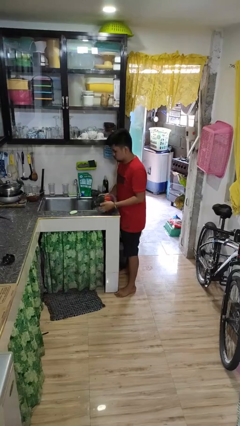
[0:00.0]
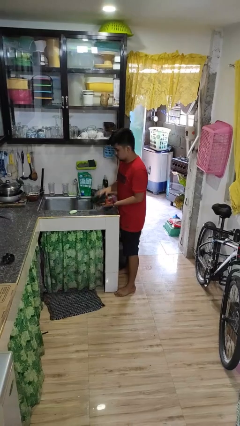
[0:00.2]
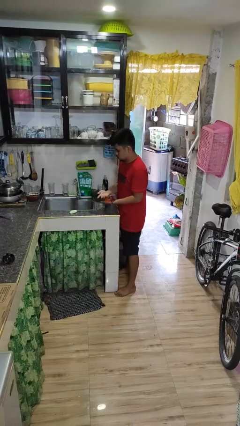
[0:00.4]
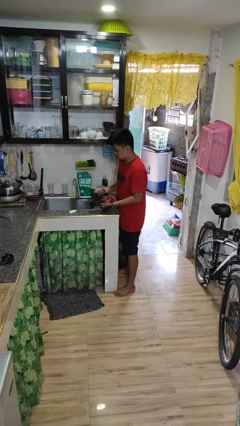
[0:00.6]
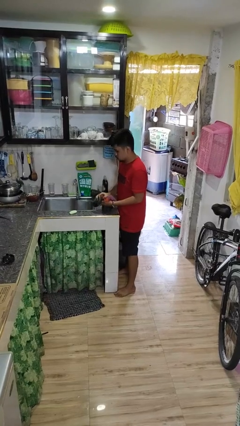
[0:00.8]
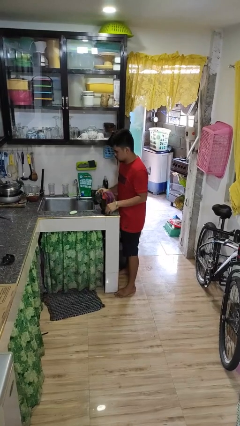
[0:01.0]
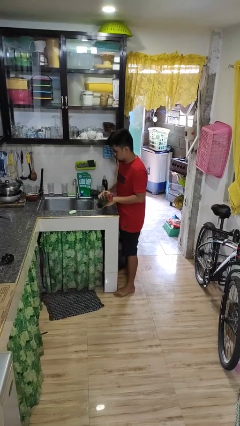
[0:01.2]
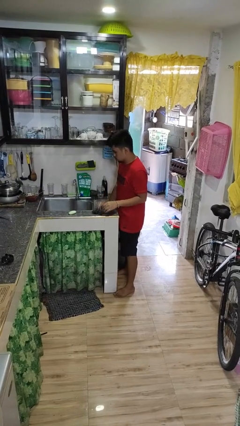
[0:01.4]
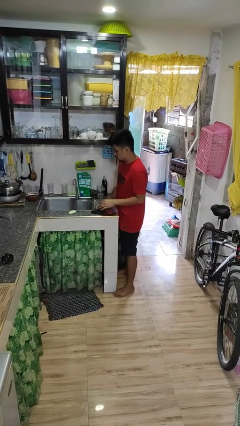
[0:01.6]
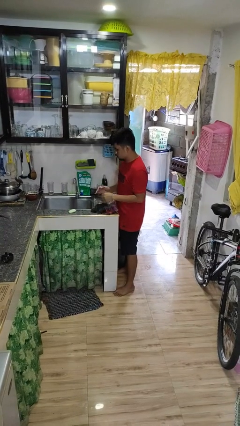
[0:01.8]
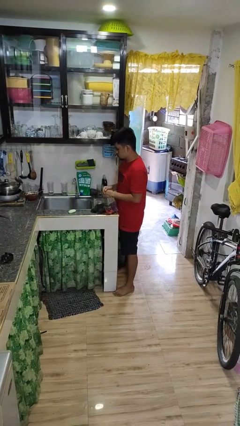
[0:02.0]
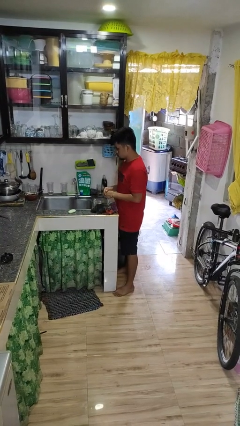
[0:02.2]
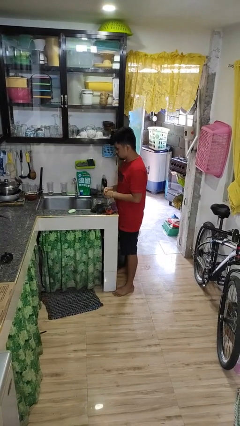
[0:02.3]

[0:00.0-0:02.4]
person dries hands with towel

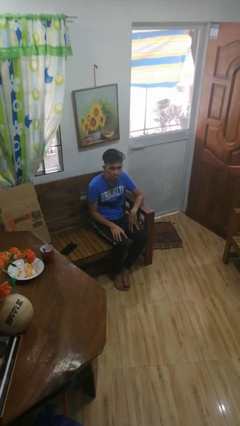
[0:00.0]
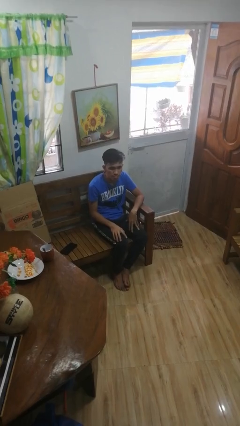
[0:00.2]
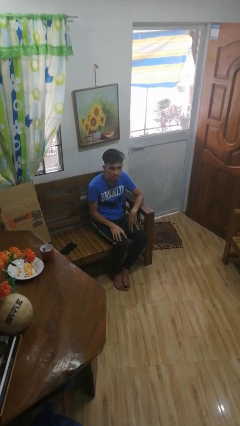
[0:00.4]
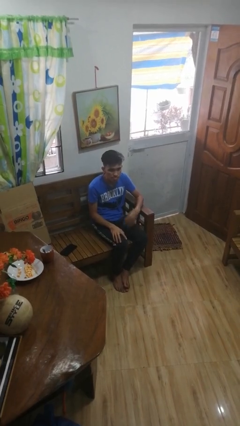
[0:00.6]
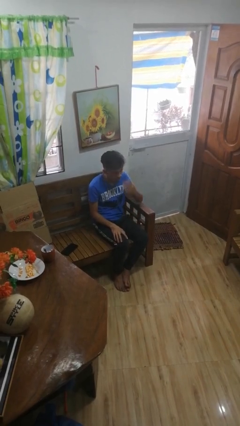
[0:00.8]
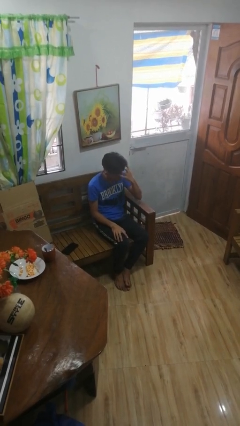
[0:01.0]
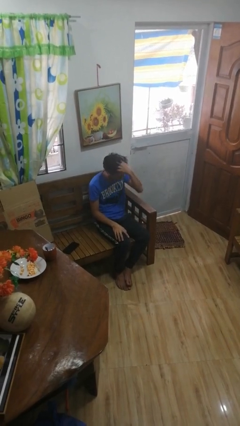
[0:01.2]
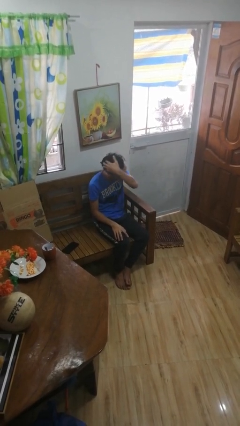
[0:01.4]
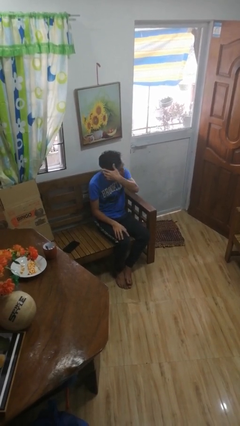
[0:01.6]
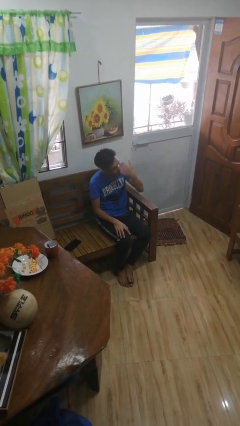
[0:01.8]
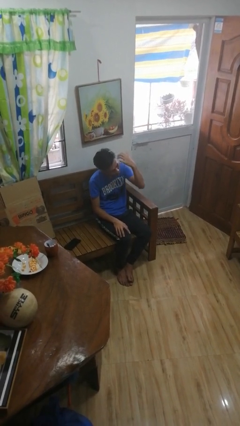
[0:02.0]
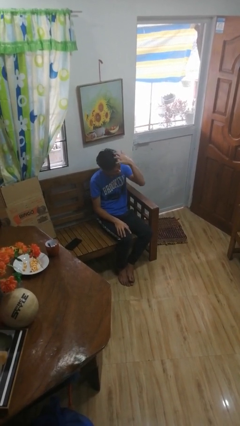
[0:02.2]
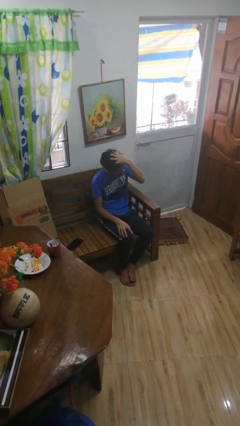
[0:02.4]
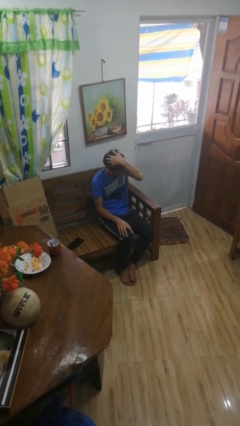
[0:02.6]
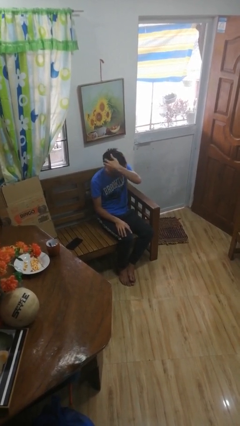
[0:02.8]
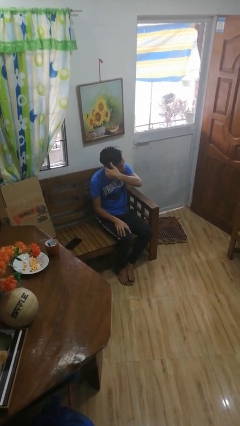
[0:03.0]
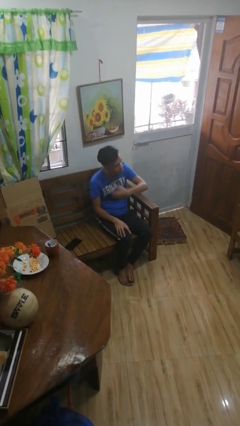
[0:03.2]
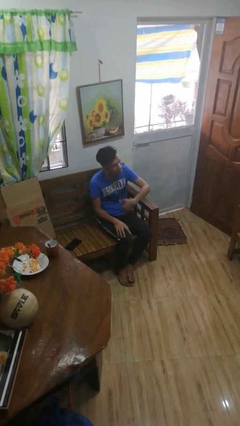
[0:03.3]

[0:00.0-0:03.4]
person strokes hair

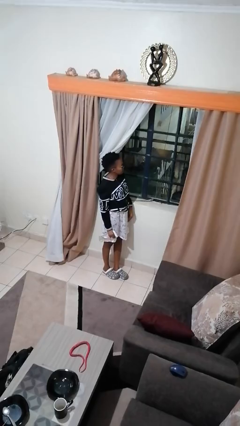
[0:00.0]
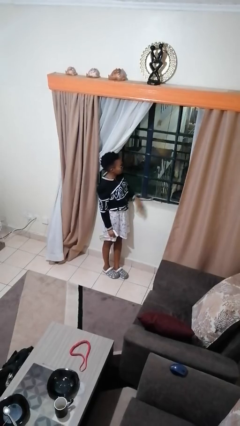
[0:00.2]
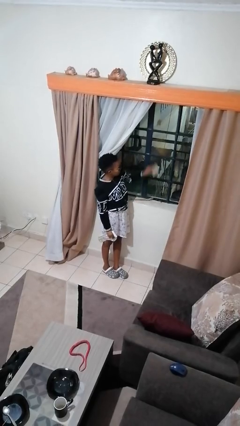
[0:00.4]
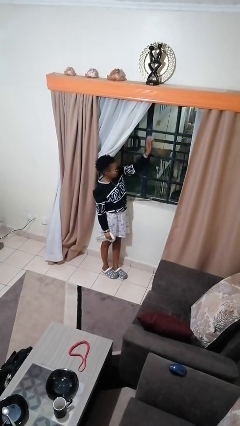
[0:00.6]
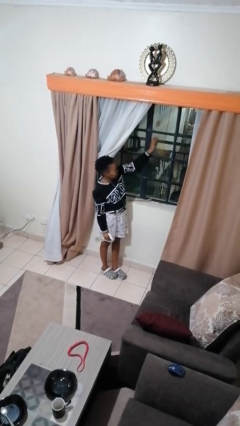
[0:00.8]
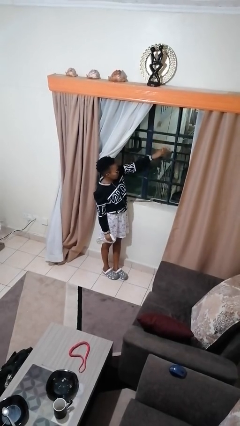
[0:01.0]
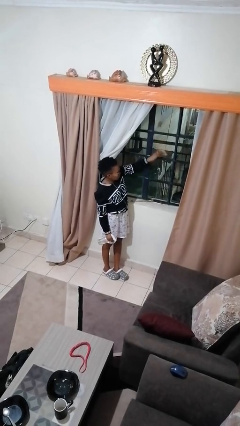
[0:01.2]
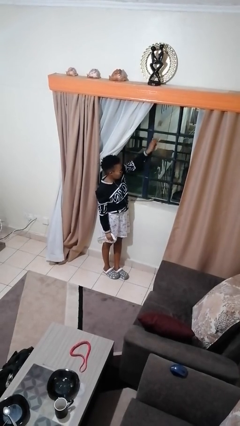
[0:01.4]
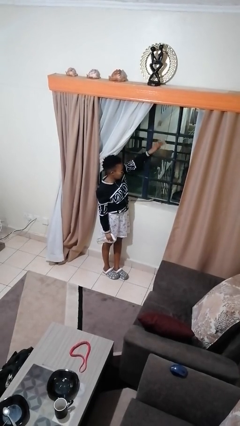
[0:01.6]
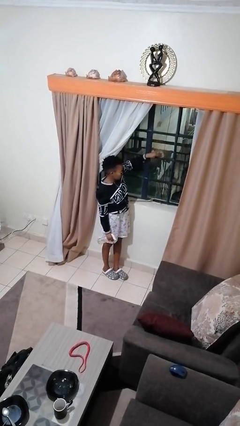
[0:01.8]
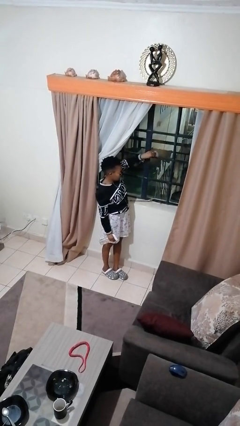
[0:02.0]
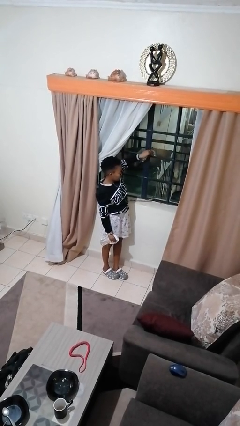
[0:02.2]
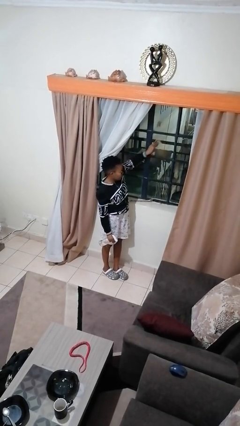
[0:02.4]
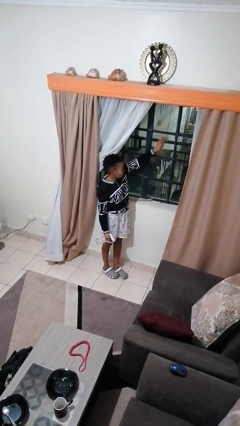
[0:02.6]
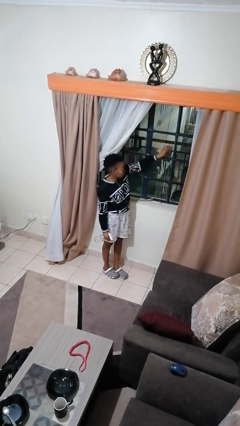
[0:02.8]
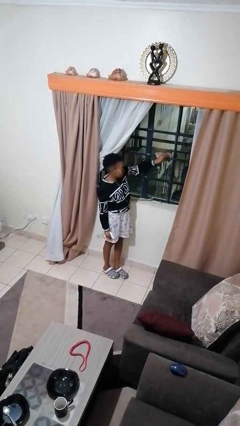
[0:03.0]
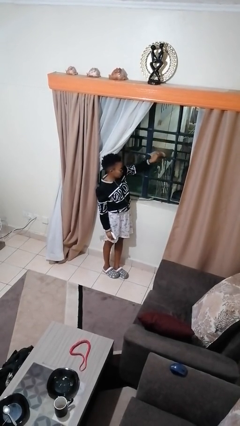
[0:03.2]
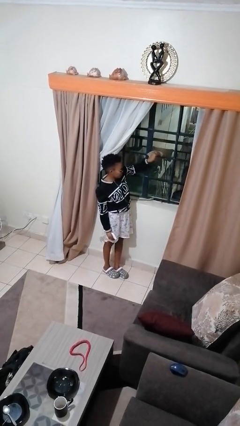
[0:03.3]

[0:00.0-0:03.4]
person washes window

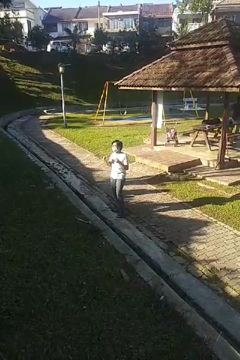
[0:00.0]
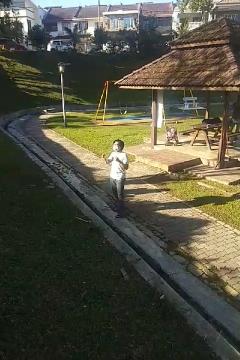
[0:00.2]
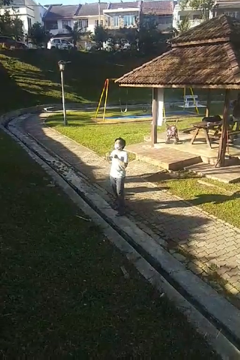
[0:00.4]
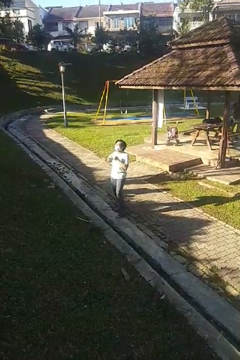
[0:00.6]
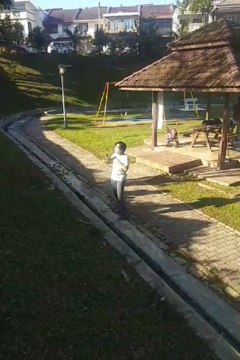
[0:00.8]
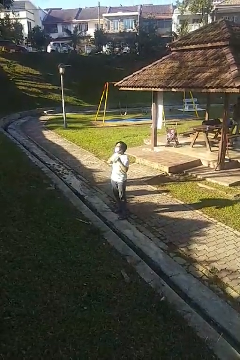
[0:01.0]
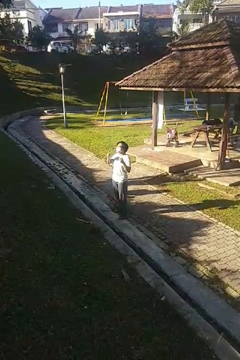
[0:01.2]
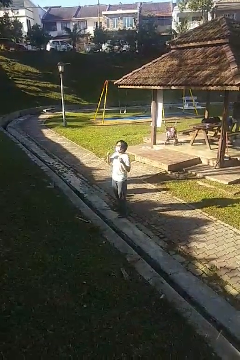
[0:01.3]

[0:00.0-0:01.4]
person drums on chest

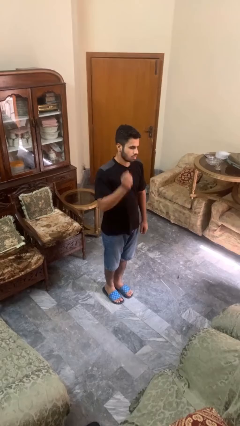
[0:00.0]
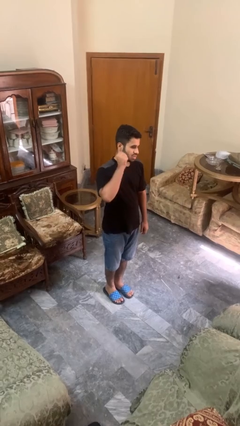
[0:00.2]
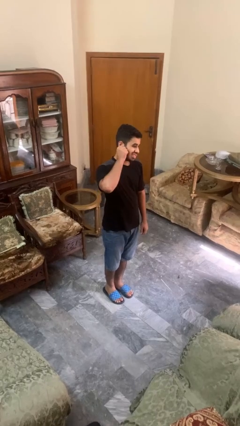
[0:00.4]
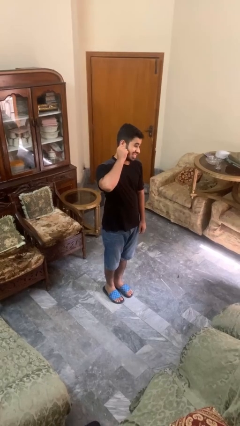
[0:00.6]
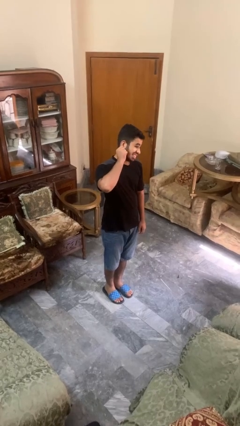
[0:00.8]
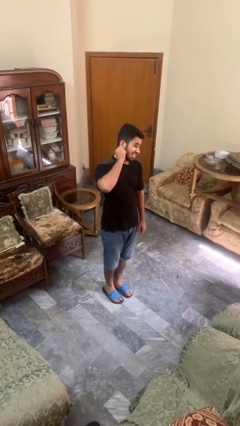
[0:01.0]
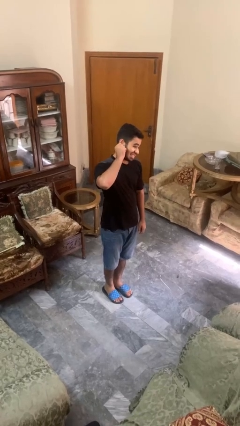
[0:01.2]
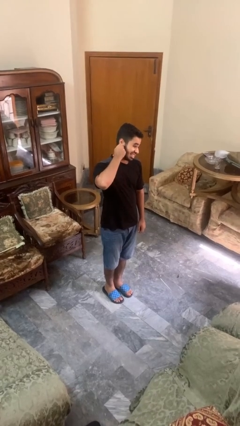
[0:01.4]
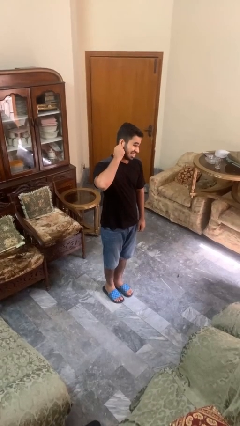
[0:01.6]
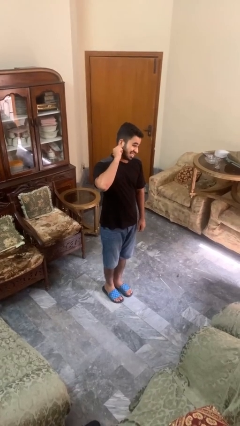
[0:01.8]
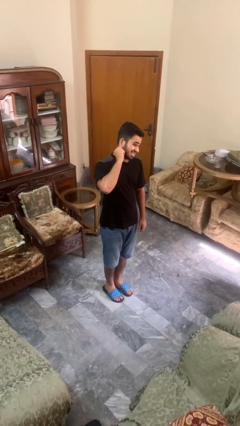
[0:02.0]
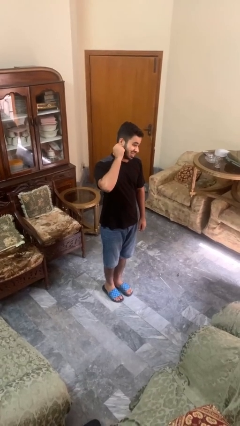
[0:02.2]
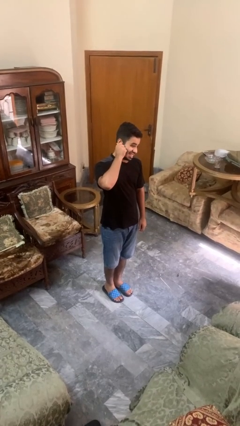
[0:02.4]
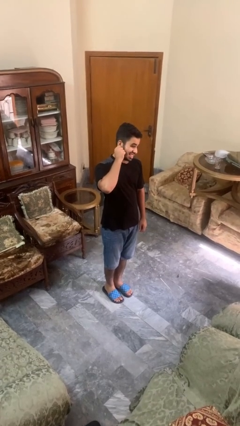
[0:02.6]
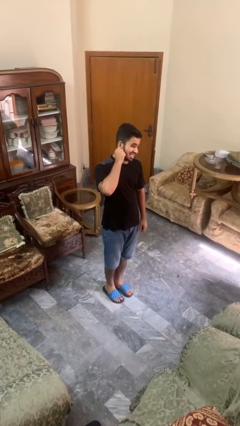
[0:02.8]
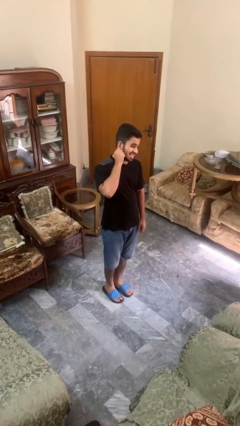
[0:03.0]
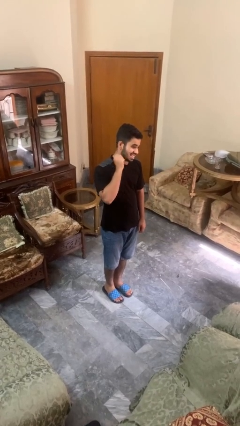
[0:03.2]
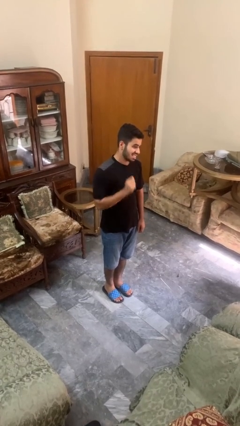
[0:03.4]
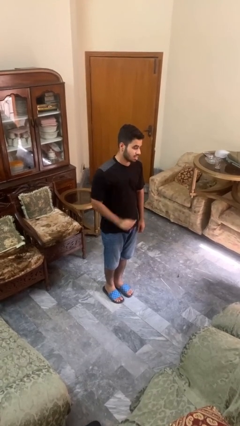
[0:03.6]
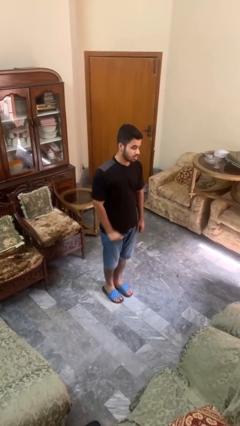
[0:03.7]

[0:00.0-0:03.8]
person touches earlobe

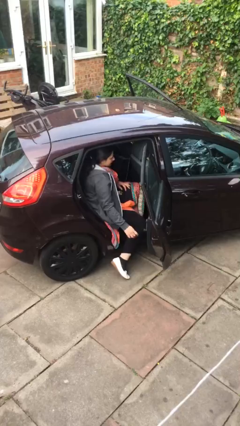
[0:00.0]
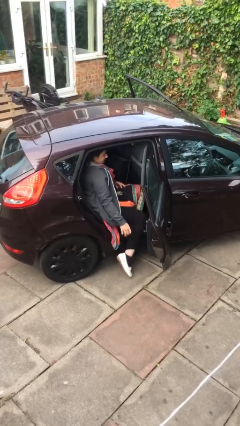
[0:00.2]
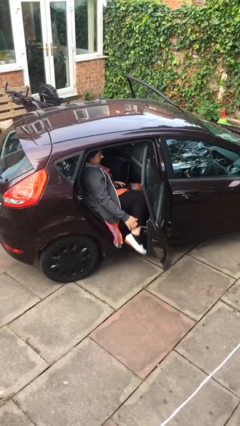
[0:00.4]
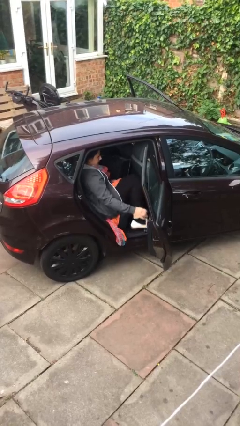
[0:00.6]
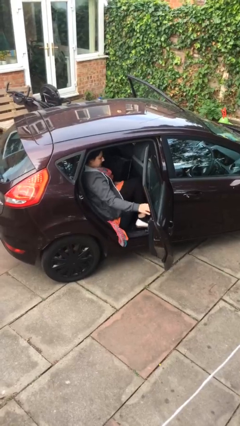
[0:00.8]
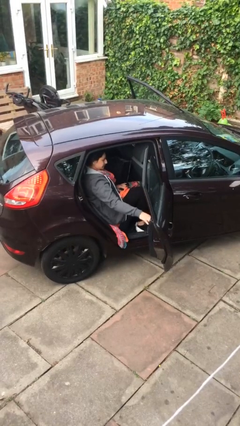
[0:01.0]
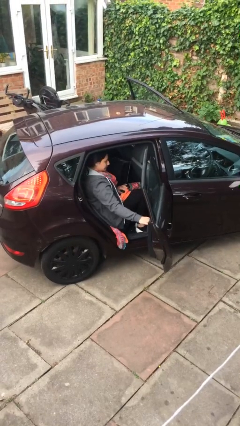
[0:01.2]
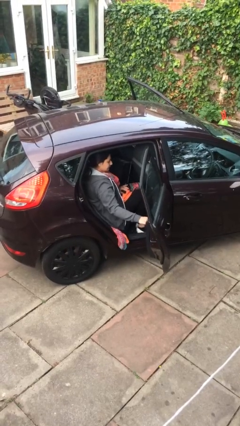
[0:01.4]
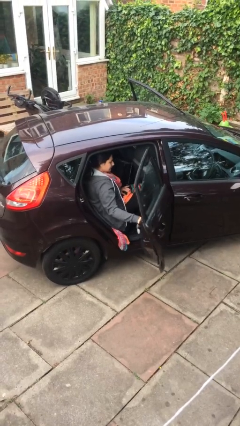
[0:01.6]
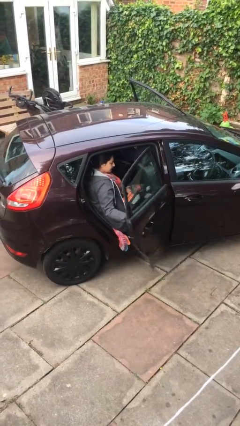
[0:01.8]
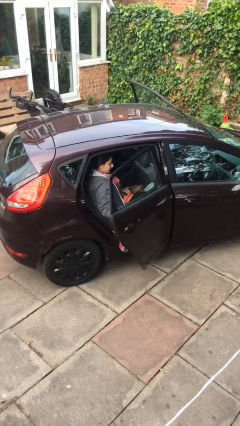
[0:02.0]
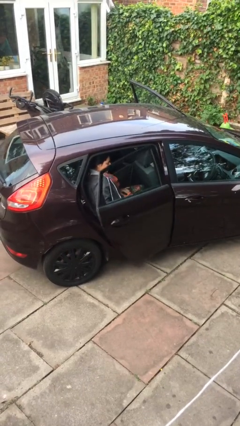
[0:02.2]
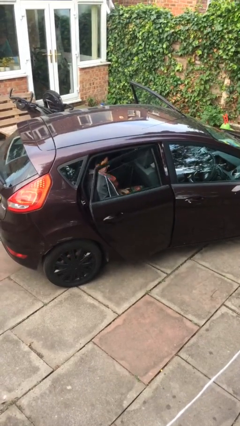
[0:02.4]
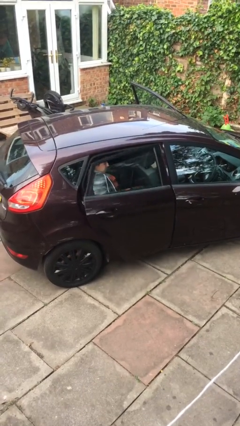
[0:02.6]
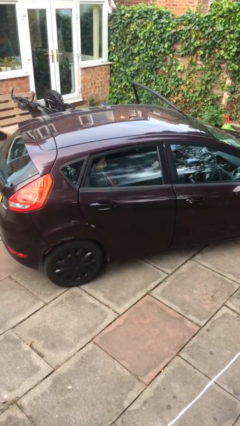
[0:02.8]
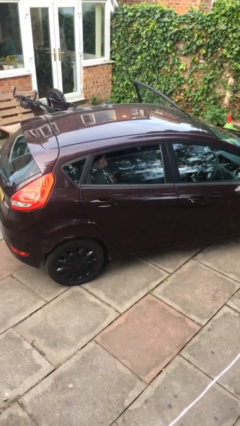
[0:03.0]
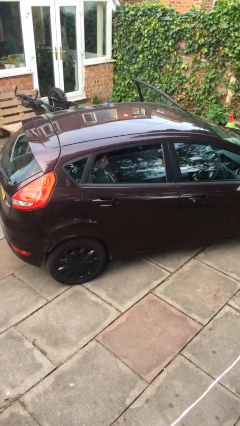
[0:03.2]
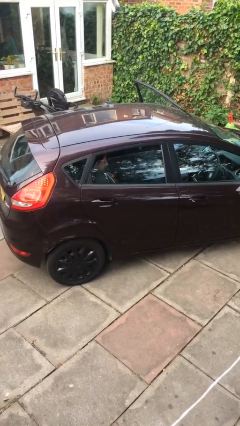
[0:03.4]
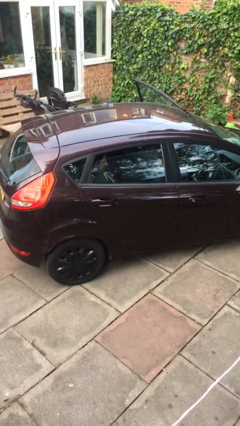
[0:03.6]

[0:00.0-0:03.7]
person closes car door
